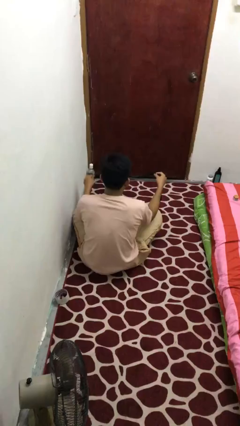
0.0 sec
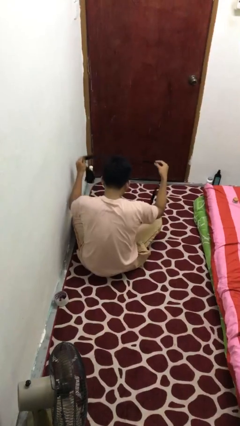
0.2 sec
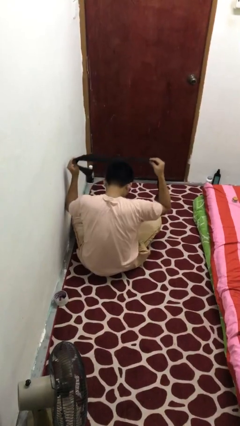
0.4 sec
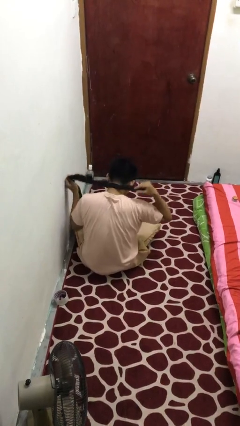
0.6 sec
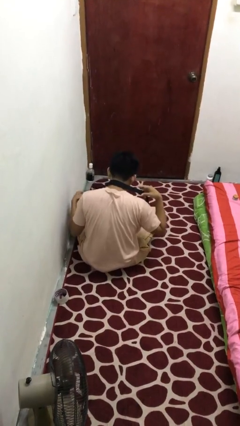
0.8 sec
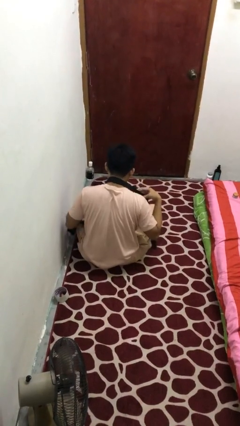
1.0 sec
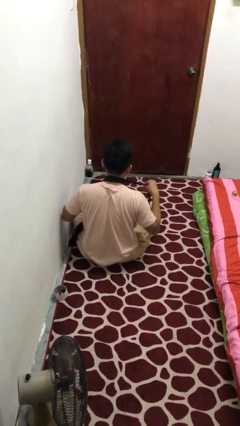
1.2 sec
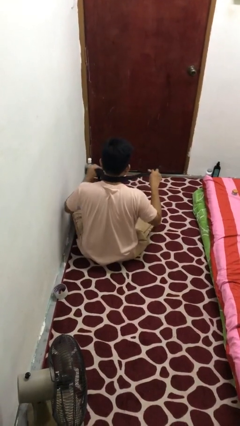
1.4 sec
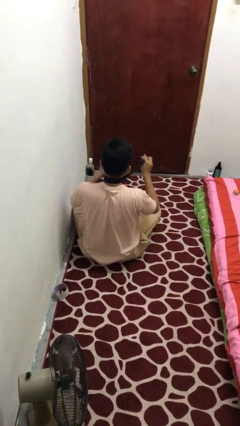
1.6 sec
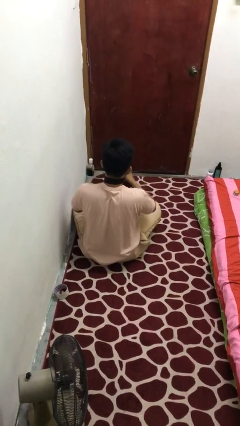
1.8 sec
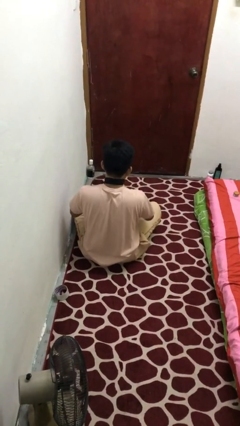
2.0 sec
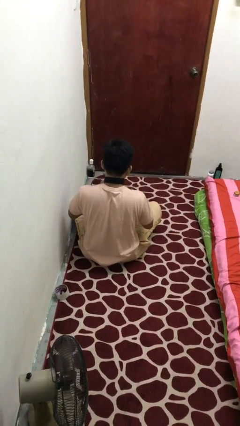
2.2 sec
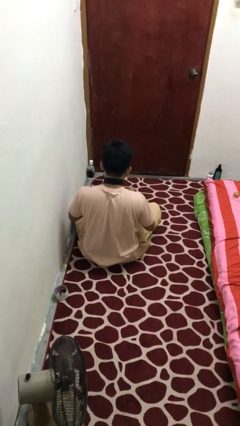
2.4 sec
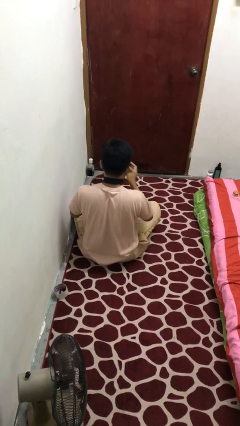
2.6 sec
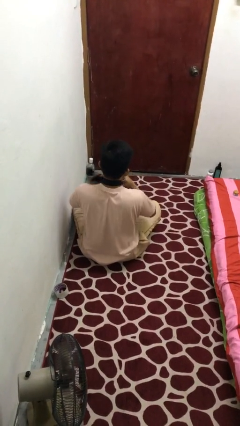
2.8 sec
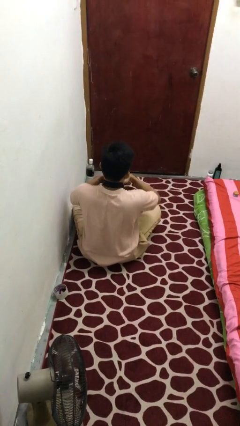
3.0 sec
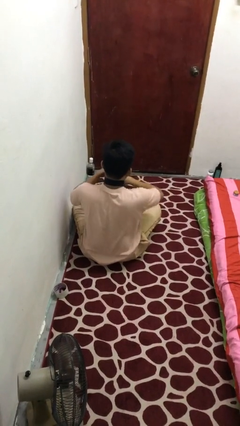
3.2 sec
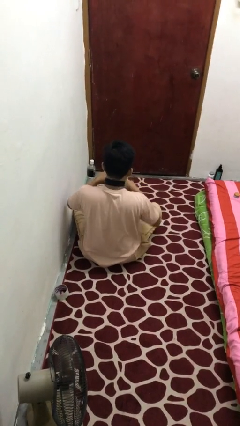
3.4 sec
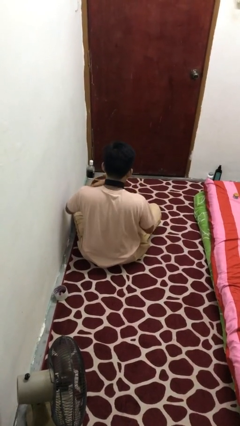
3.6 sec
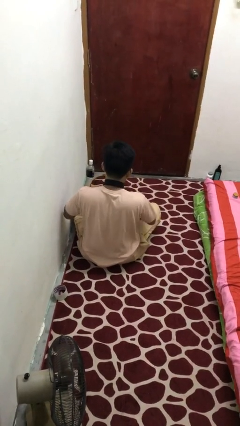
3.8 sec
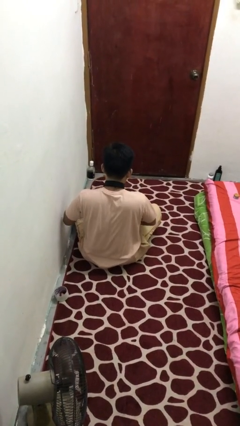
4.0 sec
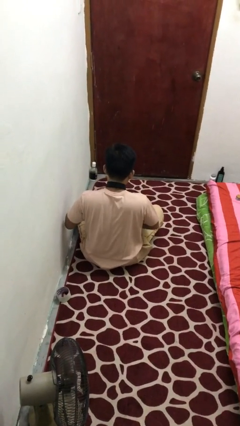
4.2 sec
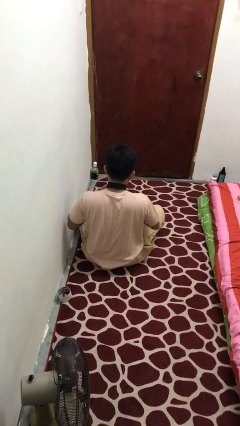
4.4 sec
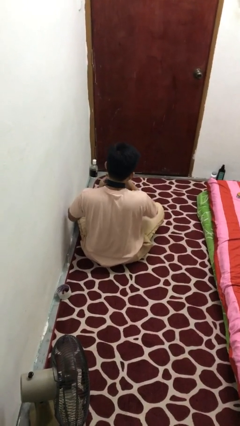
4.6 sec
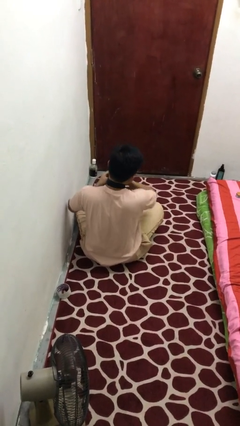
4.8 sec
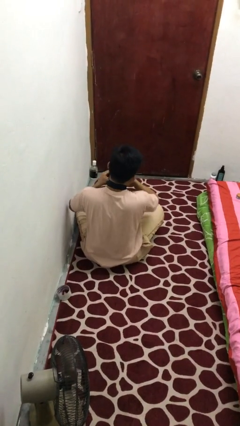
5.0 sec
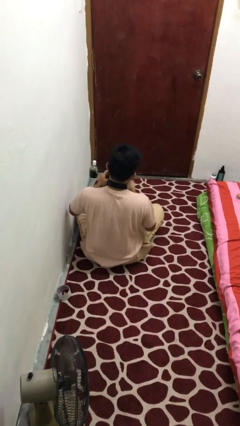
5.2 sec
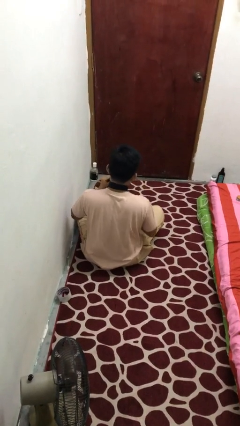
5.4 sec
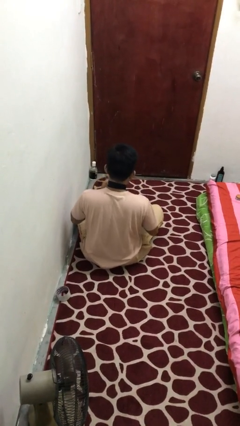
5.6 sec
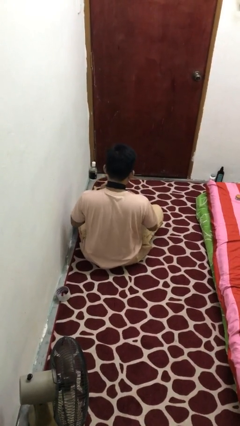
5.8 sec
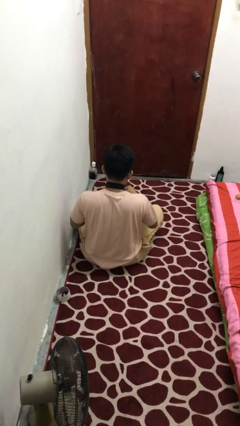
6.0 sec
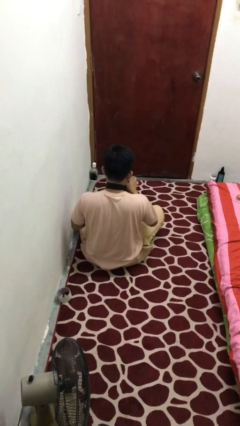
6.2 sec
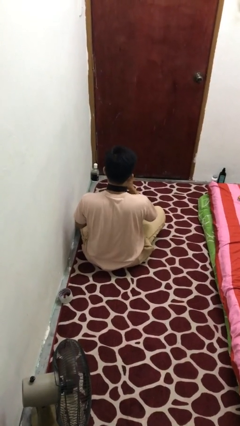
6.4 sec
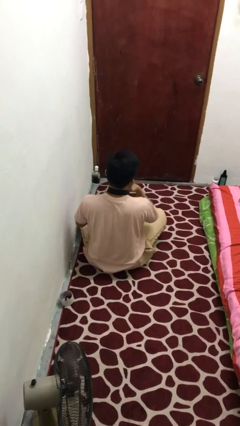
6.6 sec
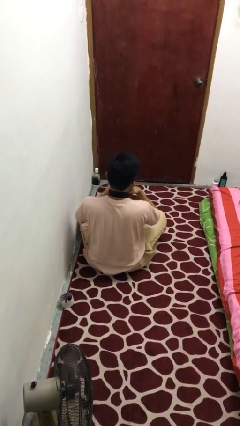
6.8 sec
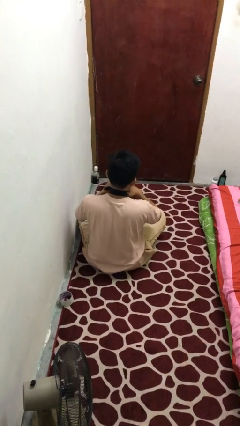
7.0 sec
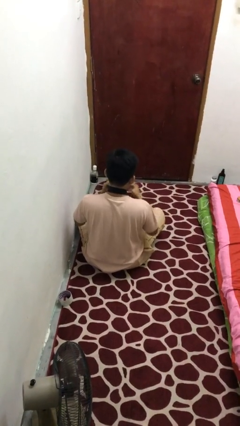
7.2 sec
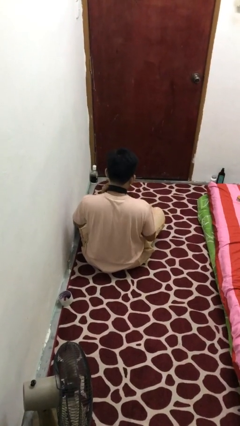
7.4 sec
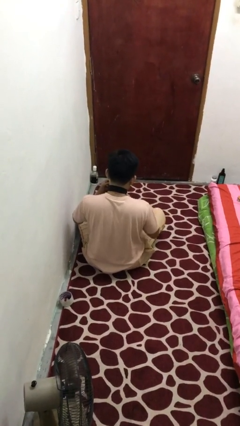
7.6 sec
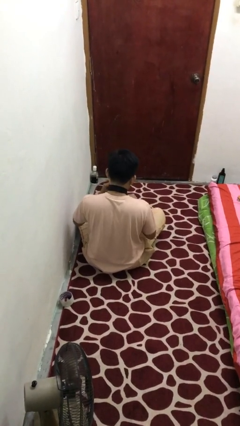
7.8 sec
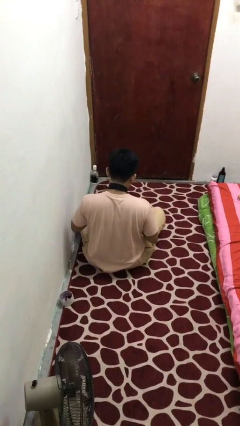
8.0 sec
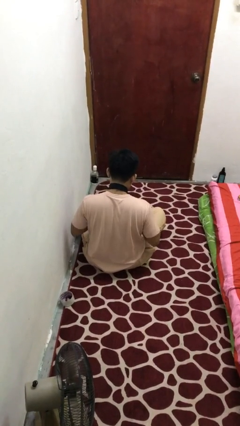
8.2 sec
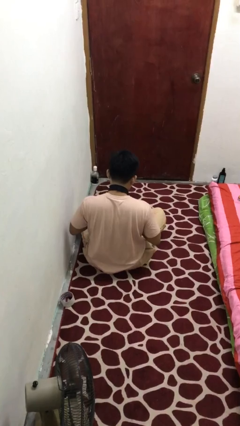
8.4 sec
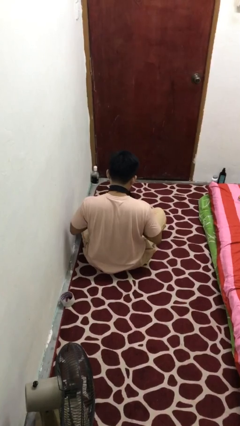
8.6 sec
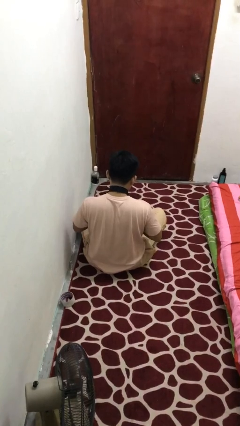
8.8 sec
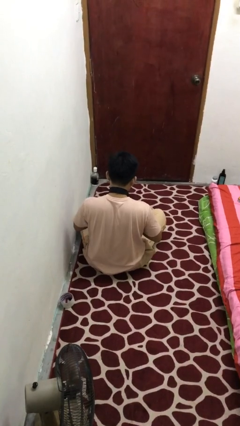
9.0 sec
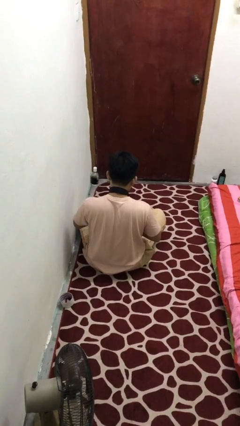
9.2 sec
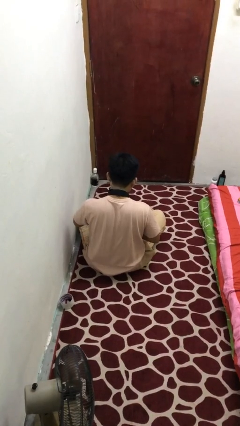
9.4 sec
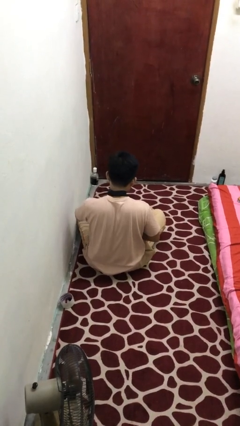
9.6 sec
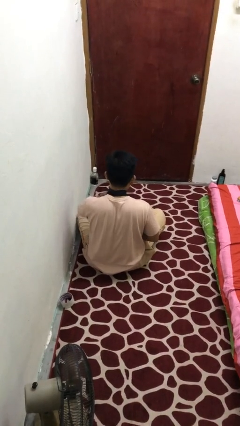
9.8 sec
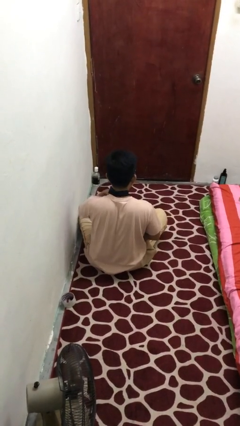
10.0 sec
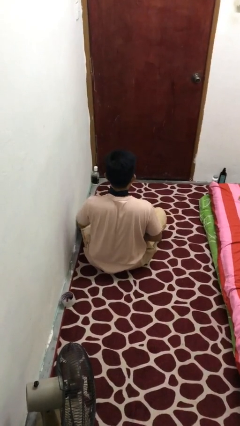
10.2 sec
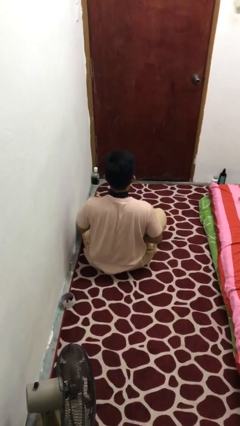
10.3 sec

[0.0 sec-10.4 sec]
person puts on necktie

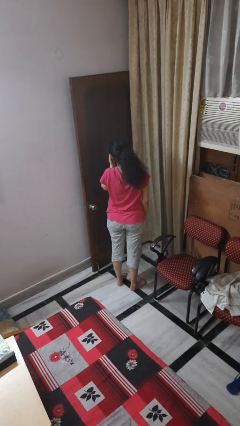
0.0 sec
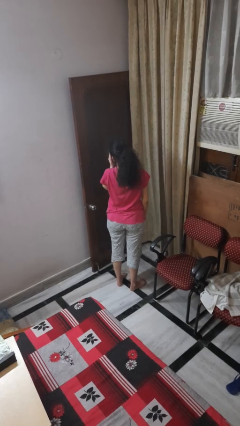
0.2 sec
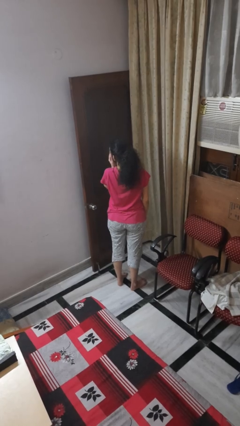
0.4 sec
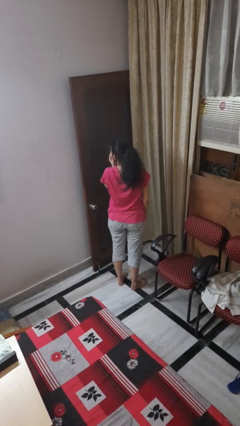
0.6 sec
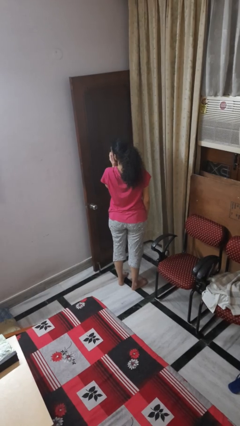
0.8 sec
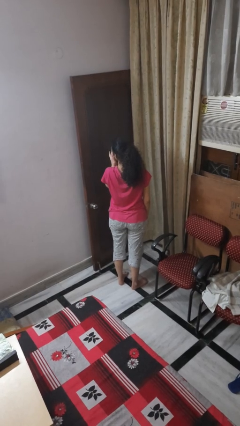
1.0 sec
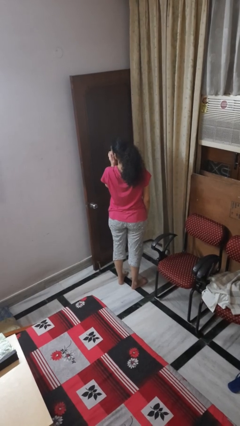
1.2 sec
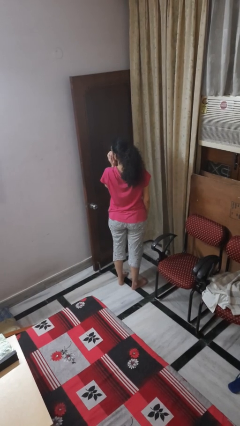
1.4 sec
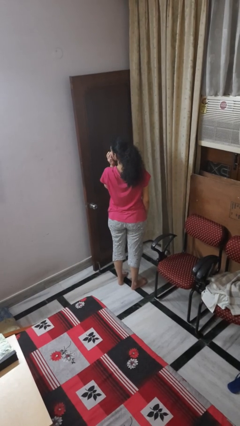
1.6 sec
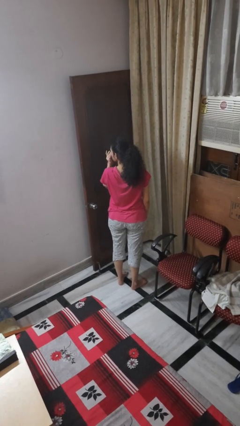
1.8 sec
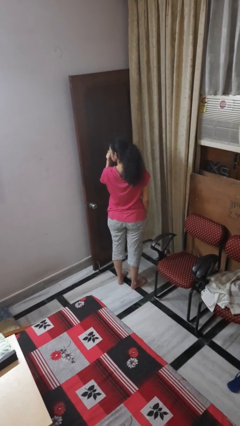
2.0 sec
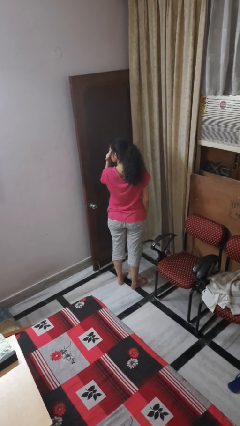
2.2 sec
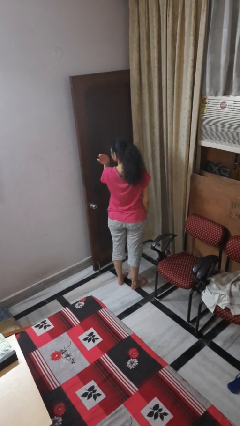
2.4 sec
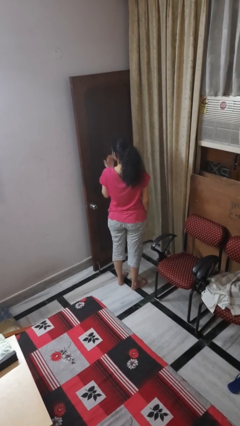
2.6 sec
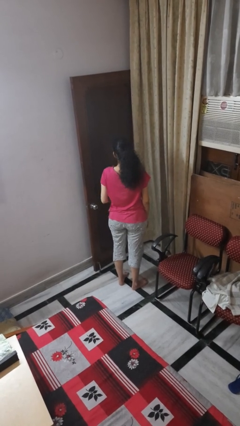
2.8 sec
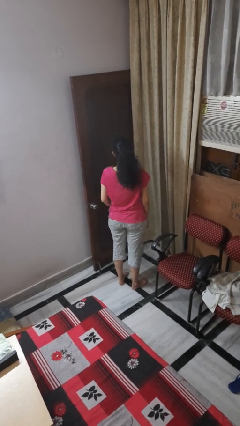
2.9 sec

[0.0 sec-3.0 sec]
person rubs eyes

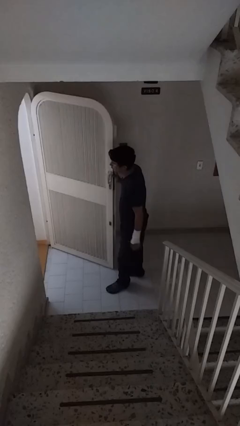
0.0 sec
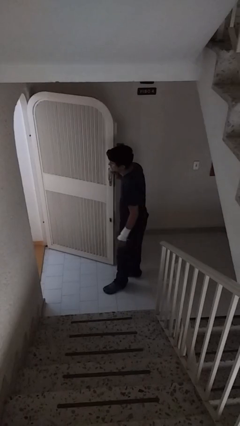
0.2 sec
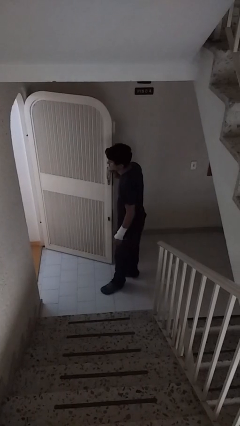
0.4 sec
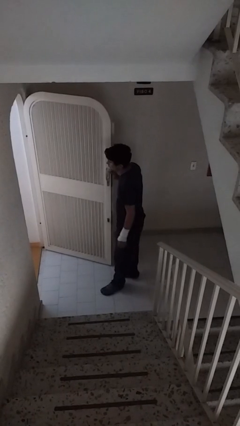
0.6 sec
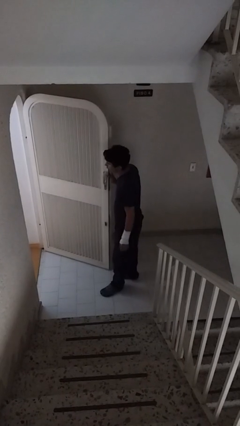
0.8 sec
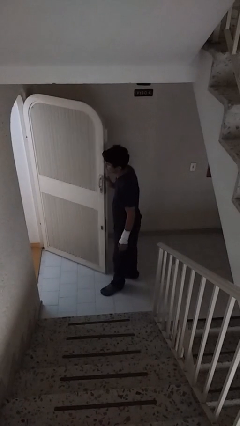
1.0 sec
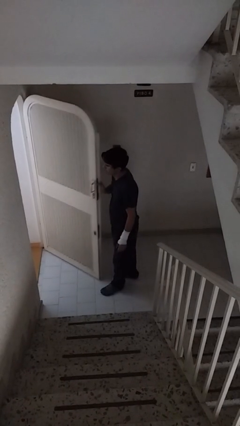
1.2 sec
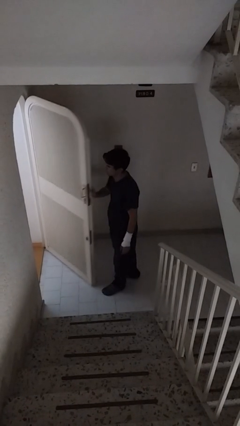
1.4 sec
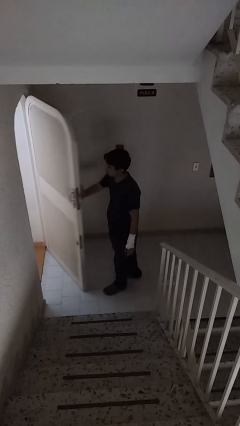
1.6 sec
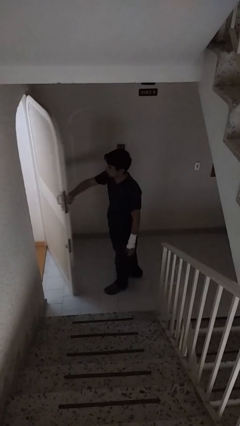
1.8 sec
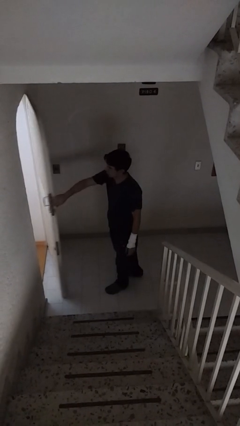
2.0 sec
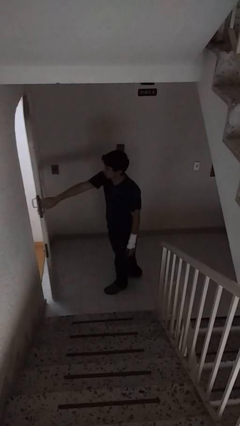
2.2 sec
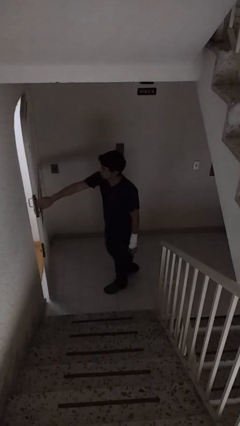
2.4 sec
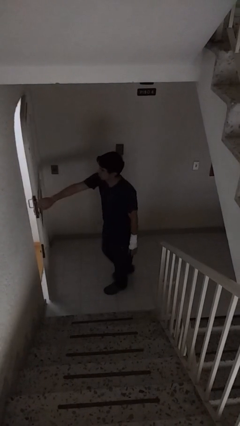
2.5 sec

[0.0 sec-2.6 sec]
person closes facility door

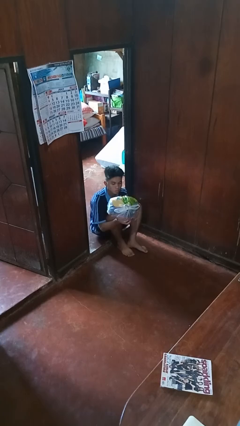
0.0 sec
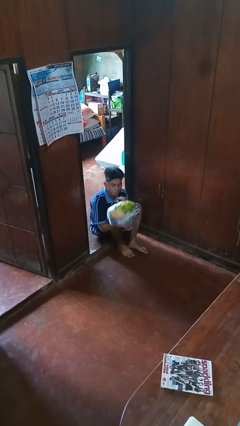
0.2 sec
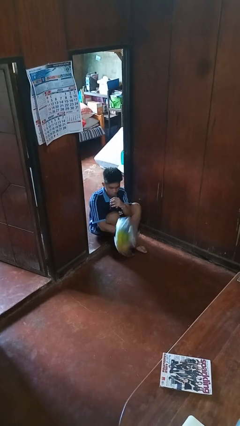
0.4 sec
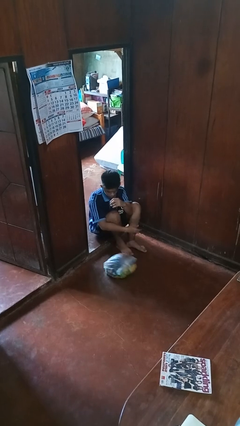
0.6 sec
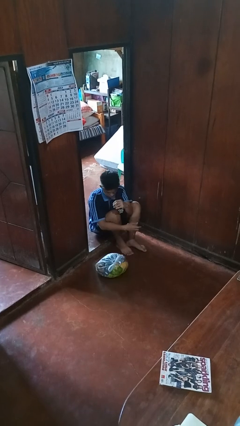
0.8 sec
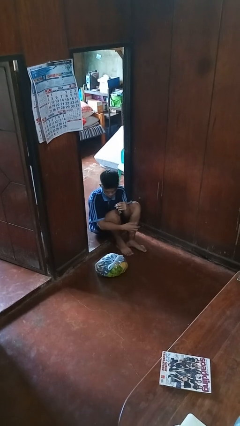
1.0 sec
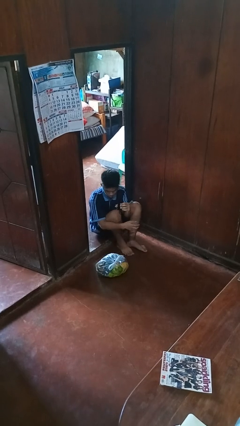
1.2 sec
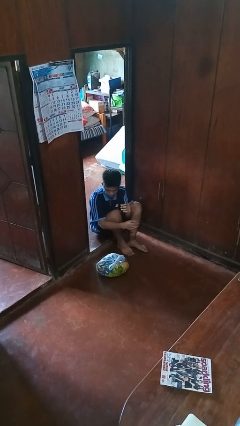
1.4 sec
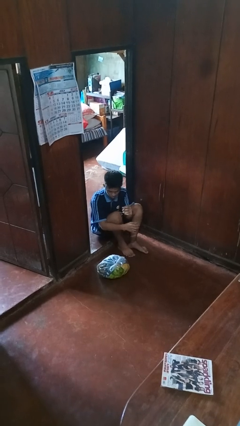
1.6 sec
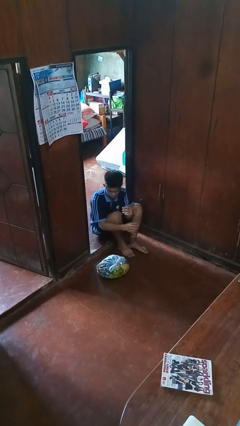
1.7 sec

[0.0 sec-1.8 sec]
person drops object
